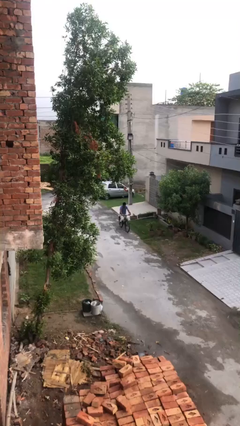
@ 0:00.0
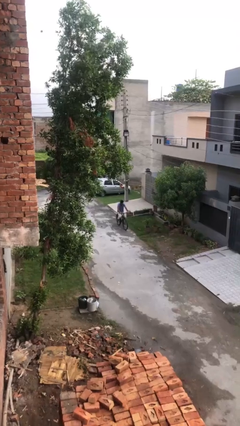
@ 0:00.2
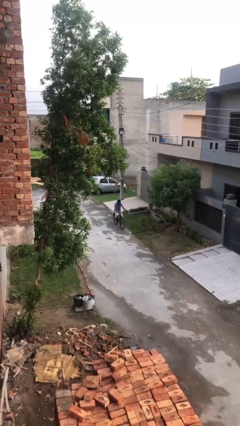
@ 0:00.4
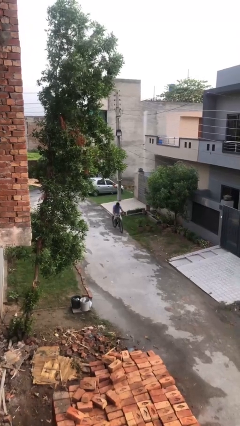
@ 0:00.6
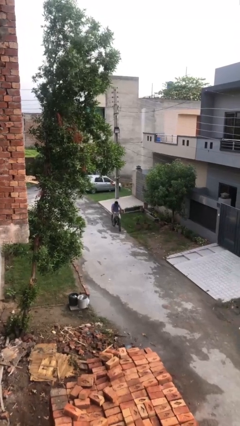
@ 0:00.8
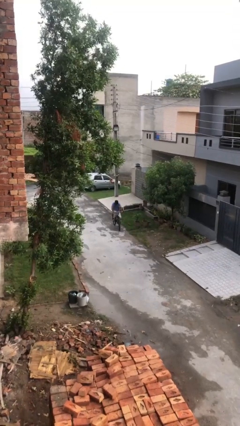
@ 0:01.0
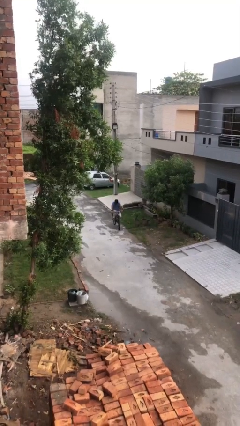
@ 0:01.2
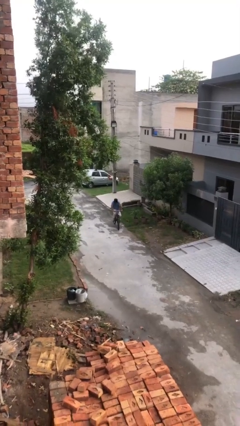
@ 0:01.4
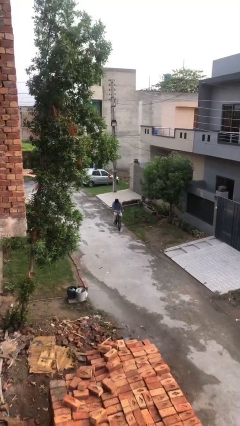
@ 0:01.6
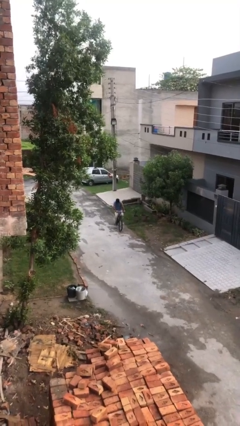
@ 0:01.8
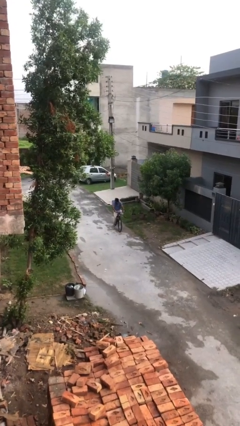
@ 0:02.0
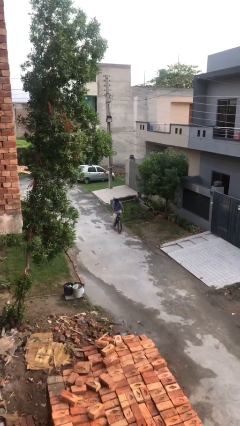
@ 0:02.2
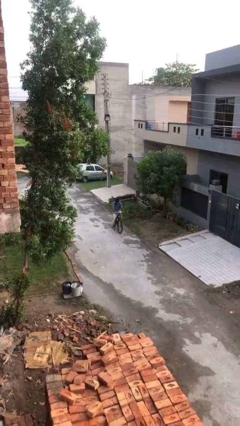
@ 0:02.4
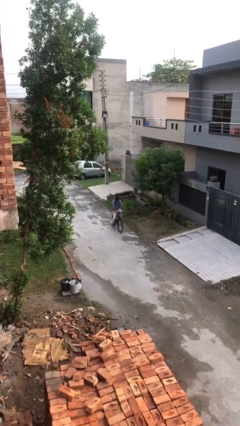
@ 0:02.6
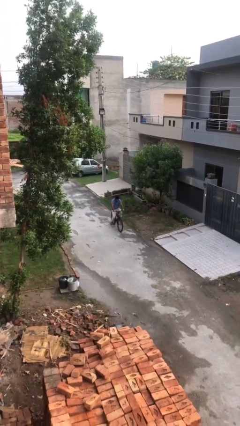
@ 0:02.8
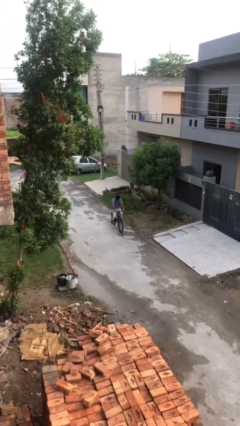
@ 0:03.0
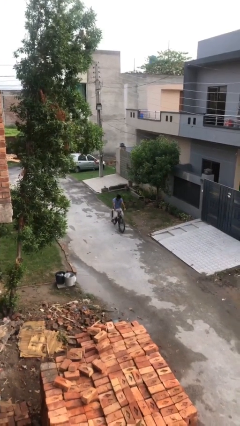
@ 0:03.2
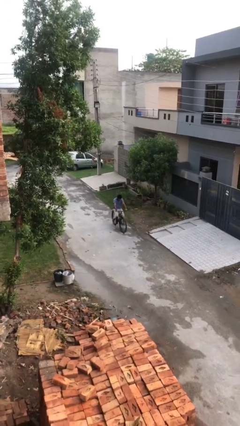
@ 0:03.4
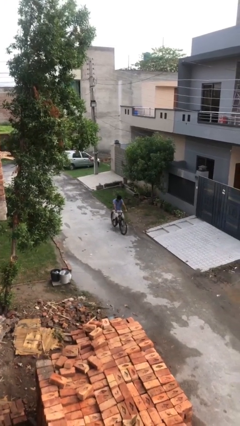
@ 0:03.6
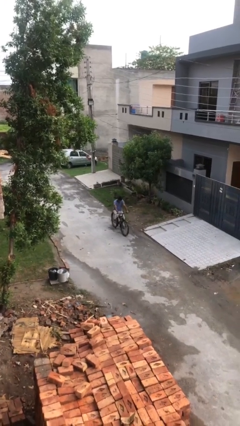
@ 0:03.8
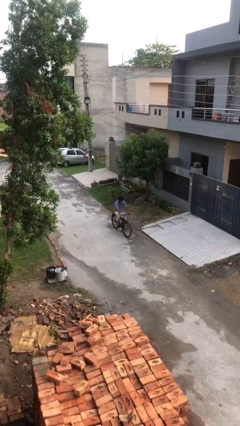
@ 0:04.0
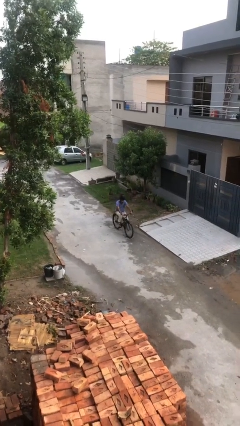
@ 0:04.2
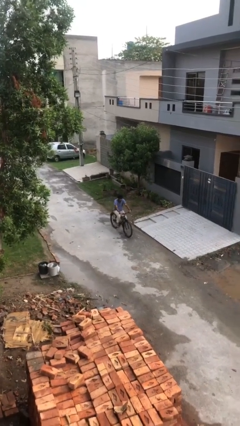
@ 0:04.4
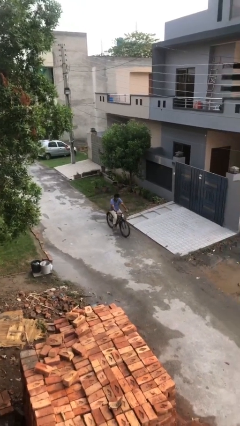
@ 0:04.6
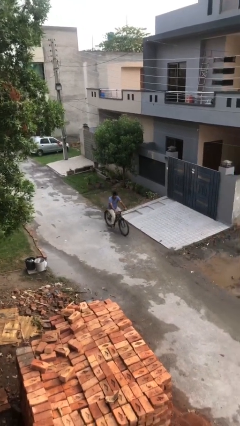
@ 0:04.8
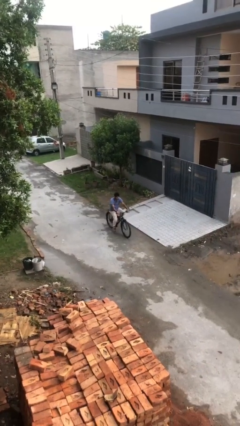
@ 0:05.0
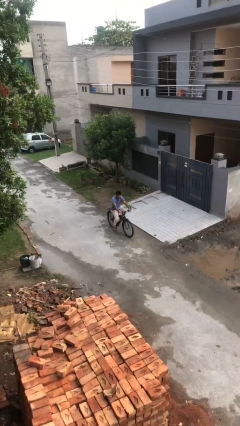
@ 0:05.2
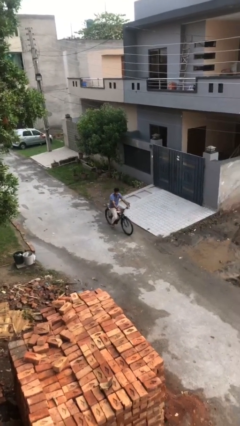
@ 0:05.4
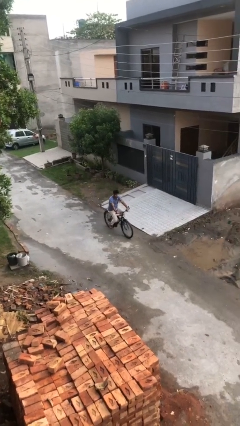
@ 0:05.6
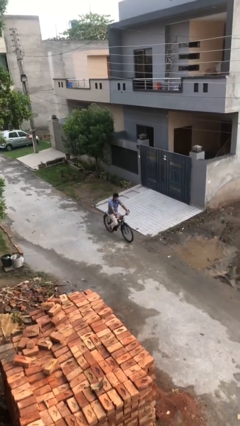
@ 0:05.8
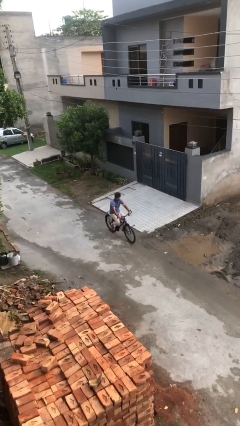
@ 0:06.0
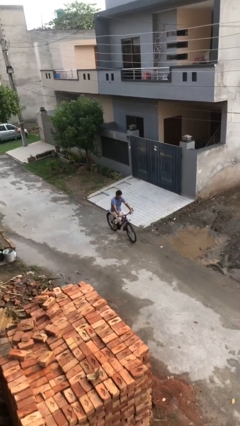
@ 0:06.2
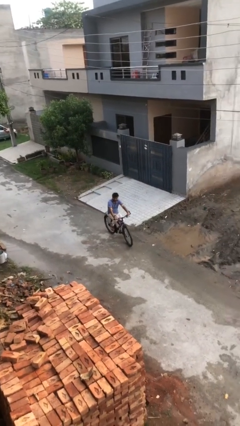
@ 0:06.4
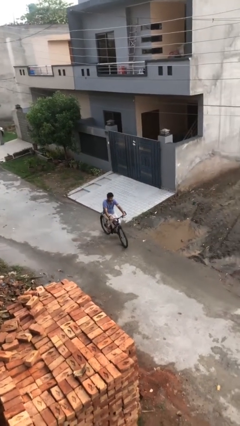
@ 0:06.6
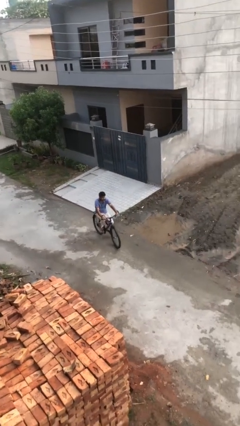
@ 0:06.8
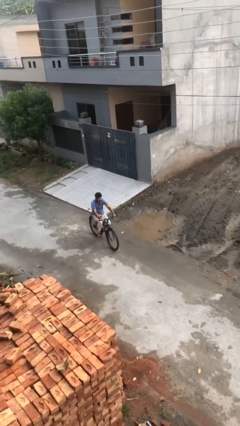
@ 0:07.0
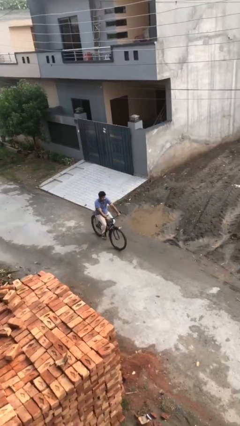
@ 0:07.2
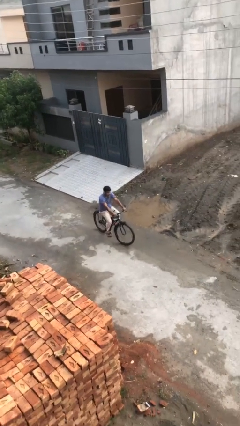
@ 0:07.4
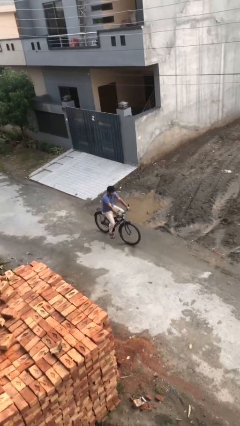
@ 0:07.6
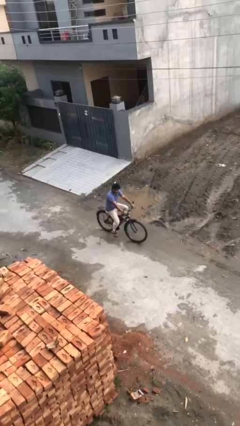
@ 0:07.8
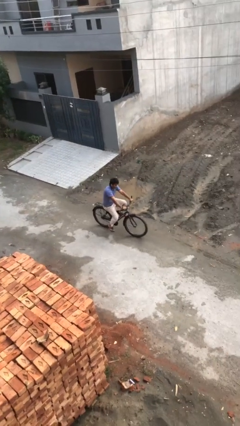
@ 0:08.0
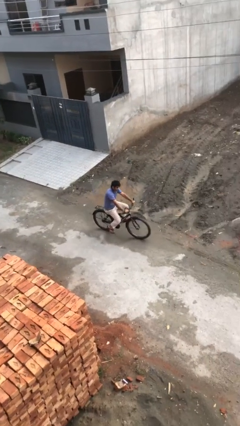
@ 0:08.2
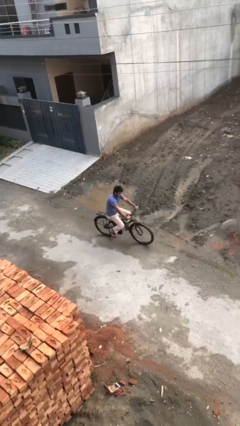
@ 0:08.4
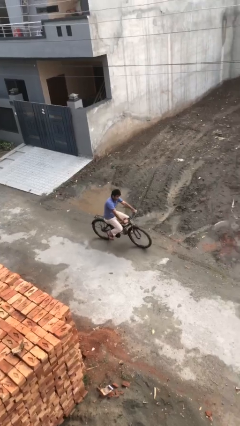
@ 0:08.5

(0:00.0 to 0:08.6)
person rides bicycle

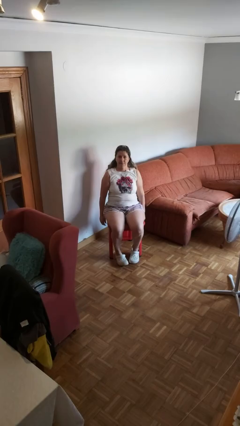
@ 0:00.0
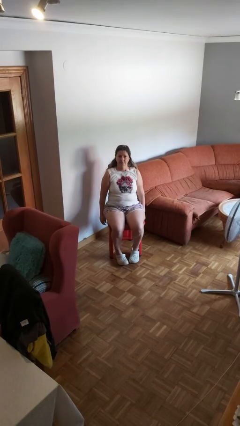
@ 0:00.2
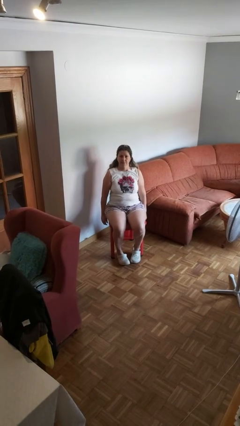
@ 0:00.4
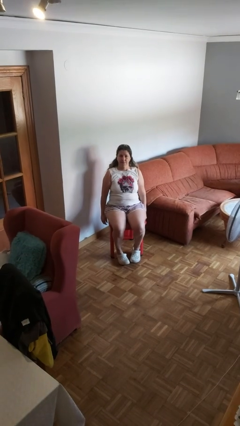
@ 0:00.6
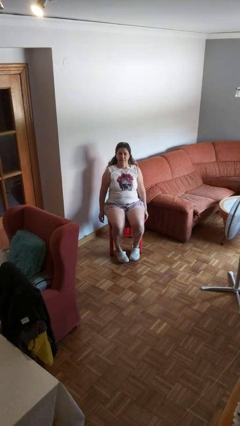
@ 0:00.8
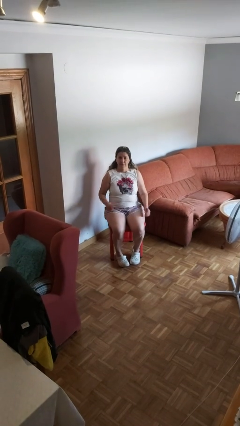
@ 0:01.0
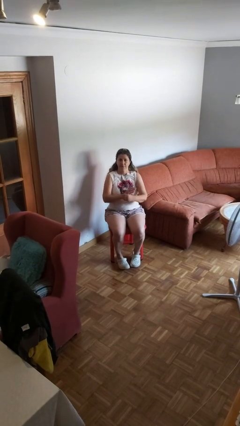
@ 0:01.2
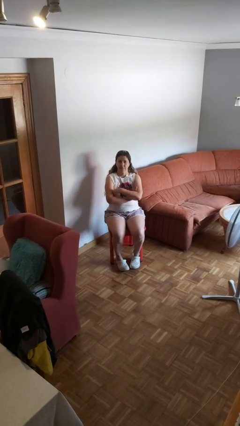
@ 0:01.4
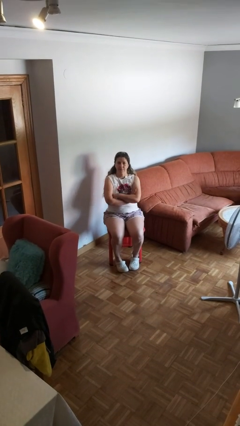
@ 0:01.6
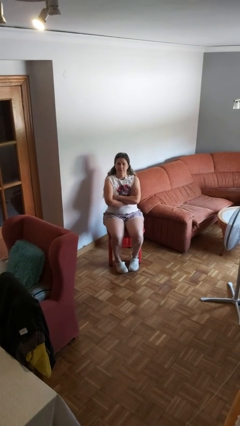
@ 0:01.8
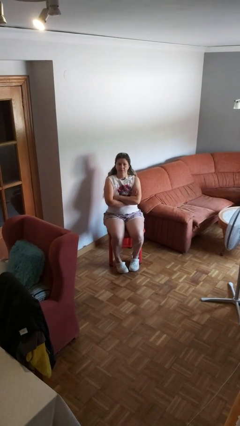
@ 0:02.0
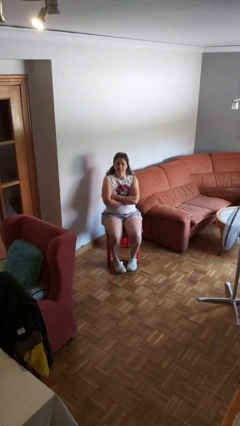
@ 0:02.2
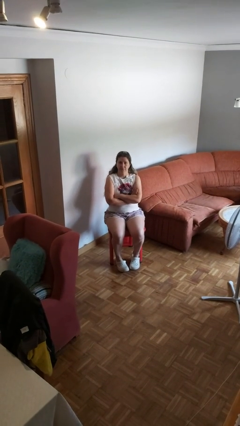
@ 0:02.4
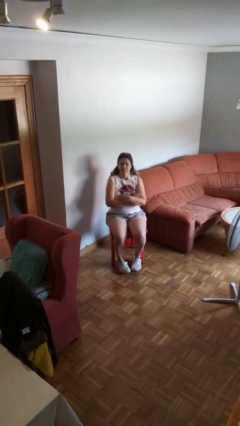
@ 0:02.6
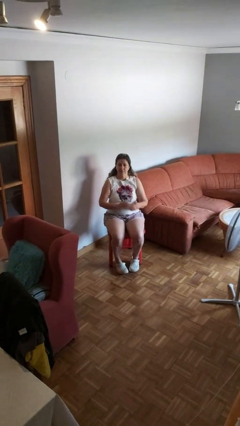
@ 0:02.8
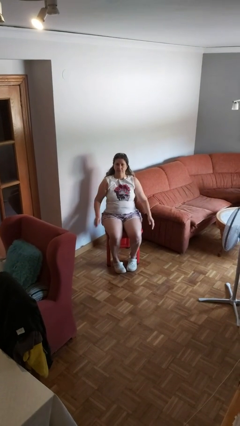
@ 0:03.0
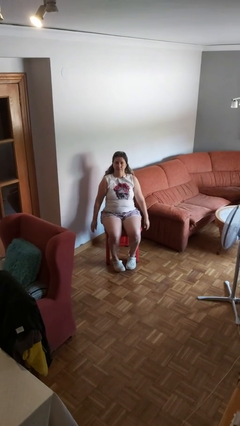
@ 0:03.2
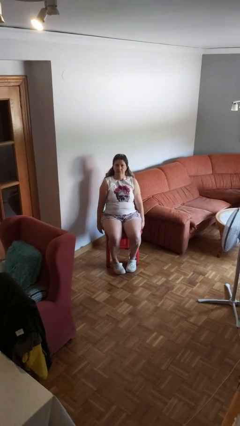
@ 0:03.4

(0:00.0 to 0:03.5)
person crosses arms

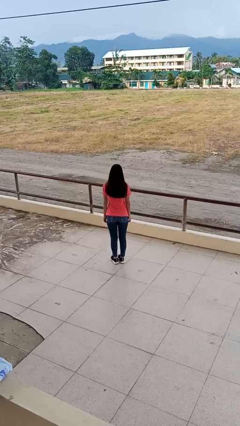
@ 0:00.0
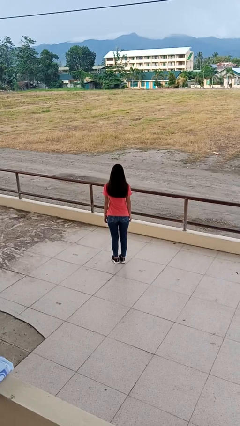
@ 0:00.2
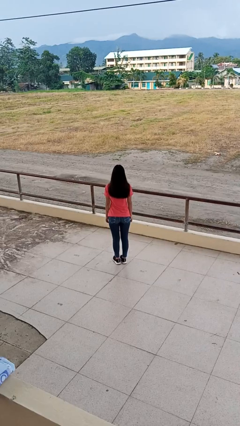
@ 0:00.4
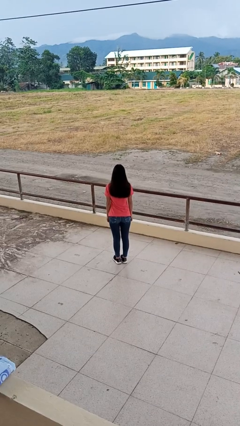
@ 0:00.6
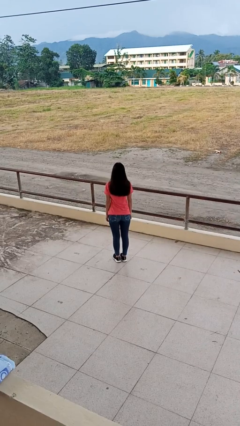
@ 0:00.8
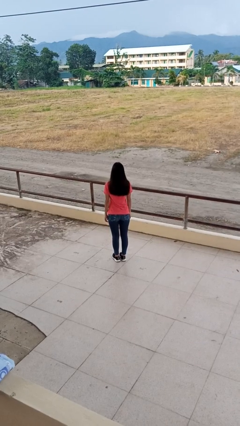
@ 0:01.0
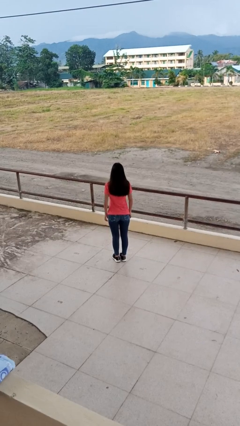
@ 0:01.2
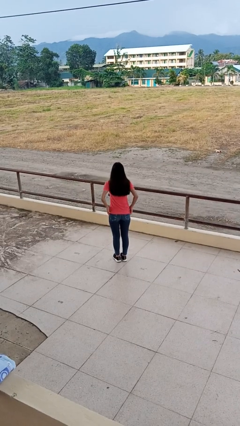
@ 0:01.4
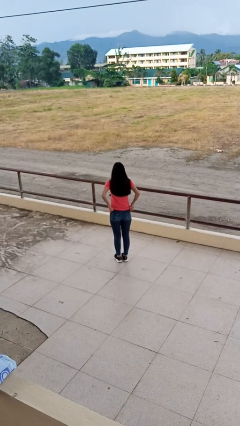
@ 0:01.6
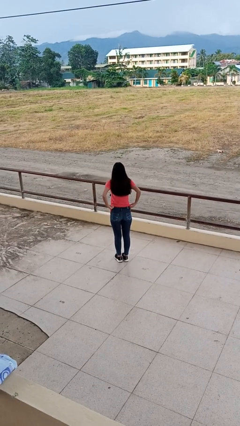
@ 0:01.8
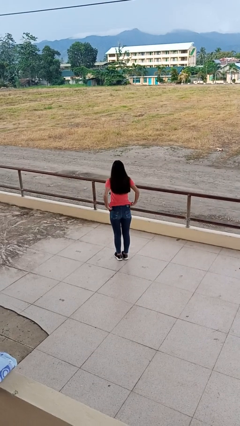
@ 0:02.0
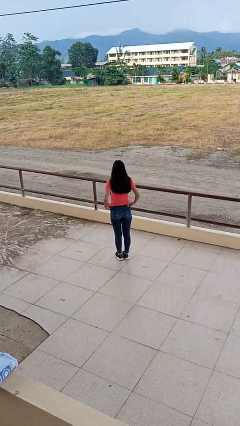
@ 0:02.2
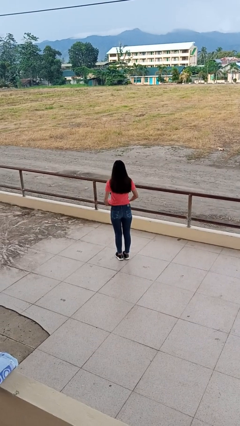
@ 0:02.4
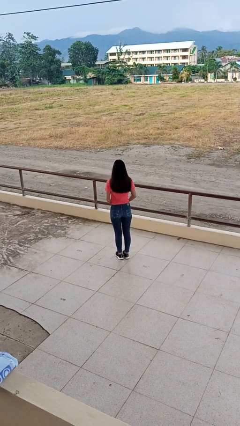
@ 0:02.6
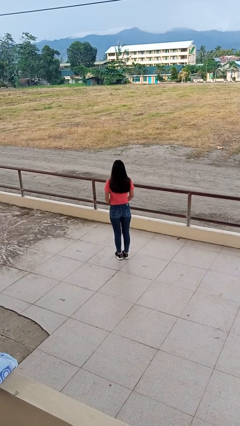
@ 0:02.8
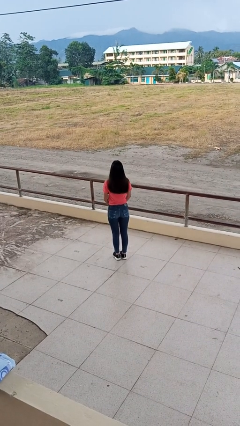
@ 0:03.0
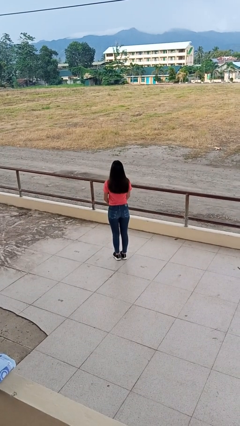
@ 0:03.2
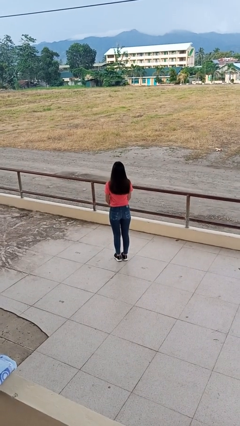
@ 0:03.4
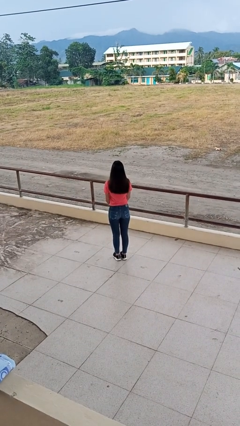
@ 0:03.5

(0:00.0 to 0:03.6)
person tucks in shirt

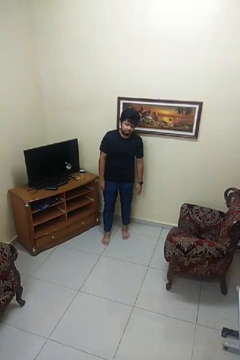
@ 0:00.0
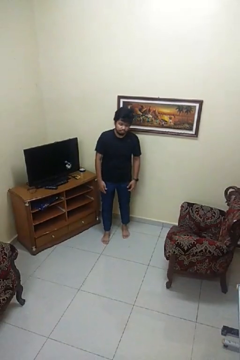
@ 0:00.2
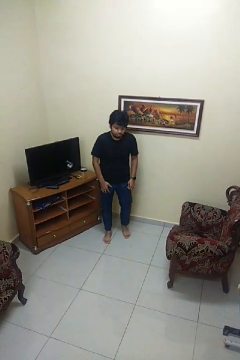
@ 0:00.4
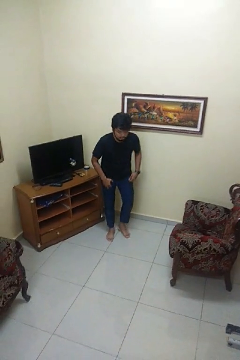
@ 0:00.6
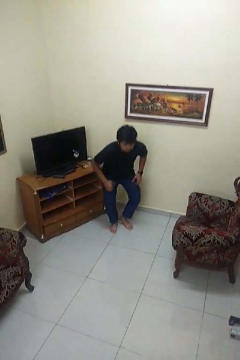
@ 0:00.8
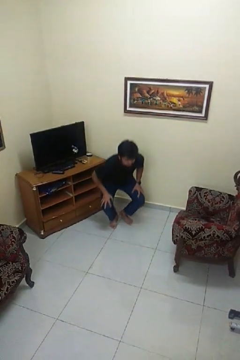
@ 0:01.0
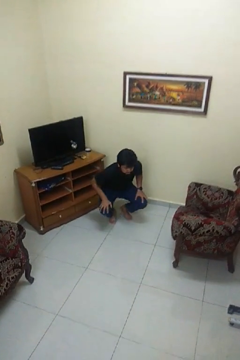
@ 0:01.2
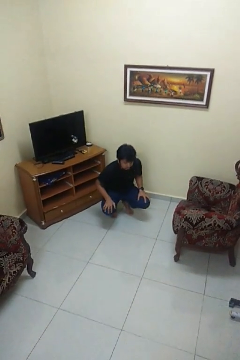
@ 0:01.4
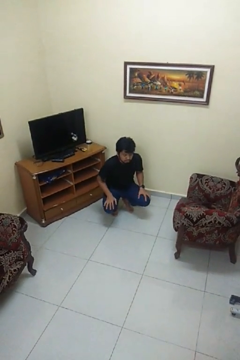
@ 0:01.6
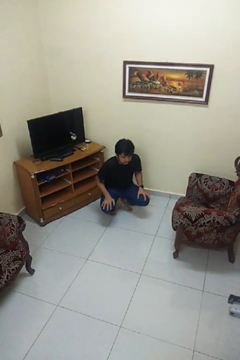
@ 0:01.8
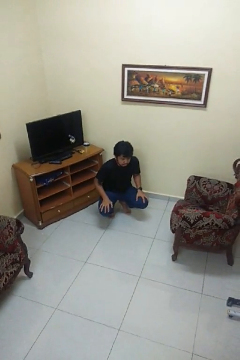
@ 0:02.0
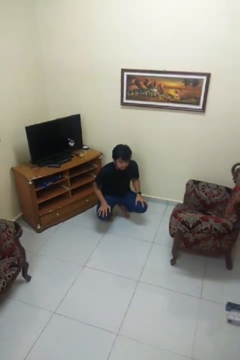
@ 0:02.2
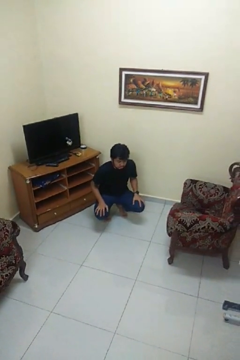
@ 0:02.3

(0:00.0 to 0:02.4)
person squats
